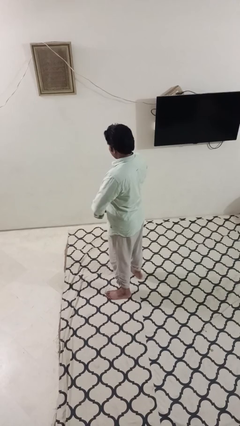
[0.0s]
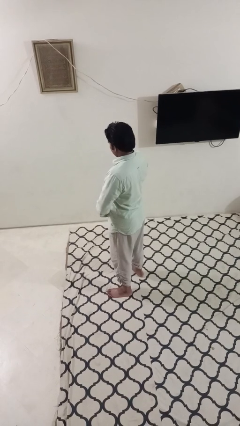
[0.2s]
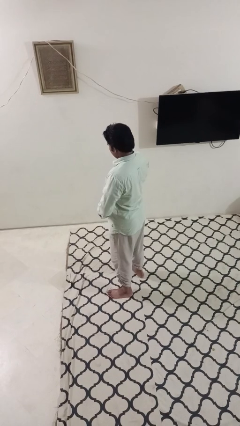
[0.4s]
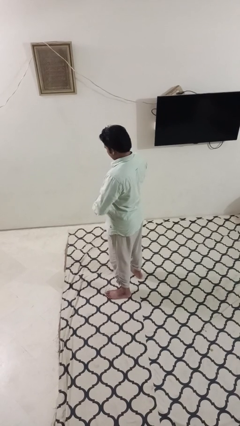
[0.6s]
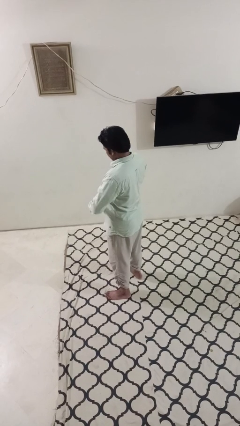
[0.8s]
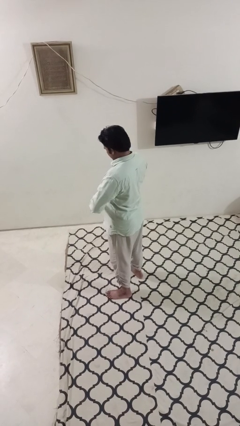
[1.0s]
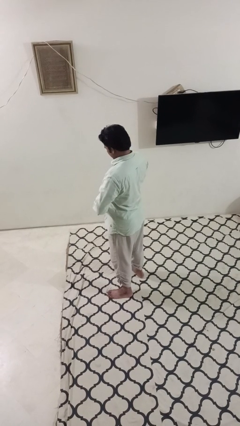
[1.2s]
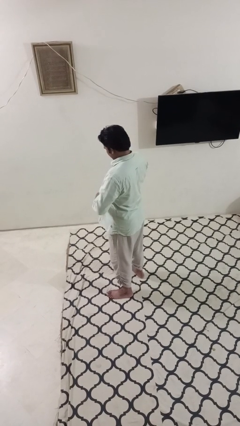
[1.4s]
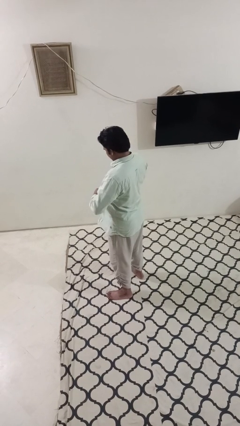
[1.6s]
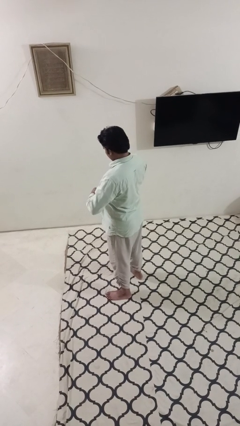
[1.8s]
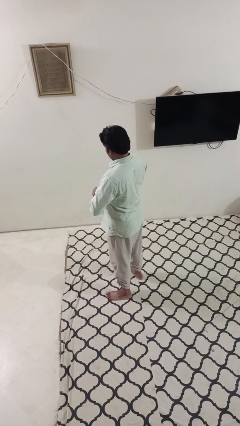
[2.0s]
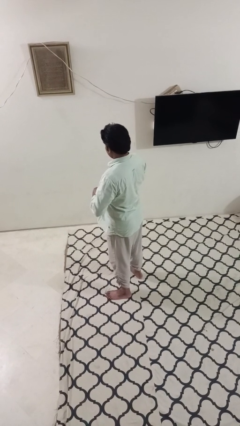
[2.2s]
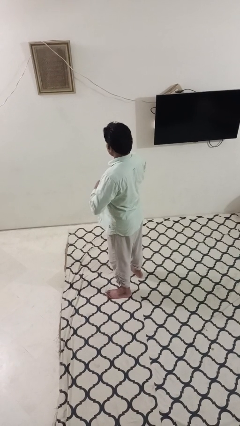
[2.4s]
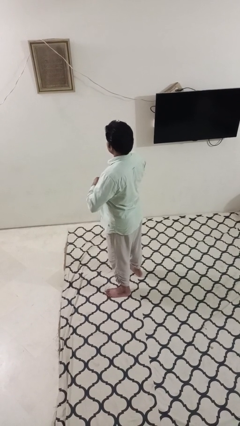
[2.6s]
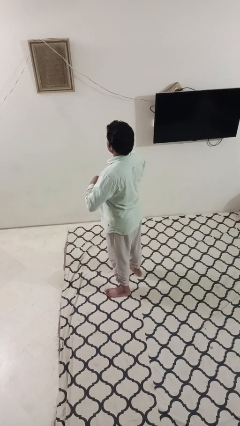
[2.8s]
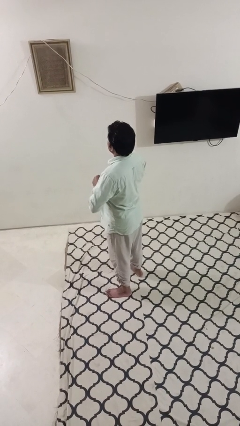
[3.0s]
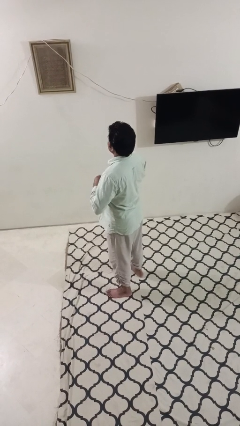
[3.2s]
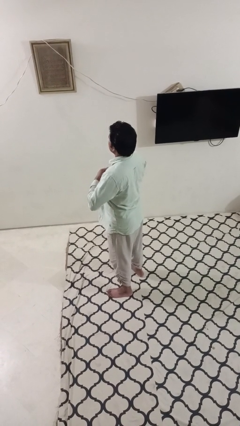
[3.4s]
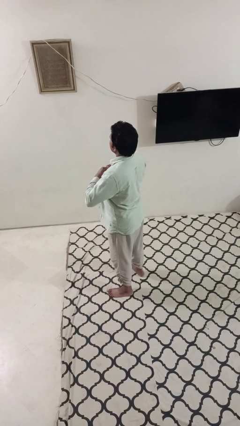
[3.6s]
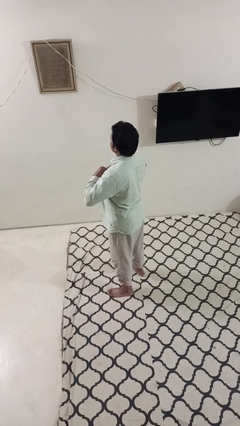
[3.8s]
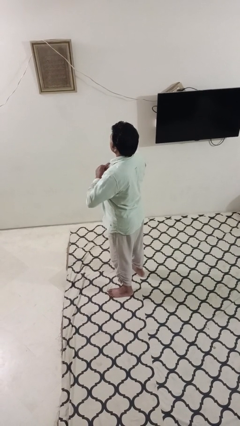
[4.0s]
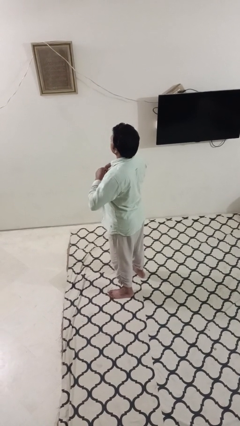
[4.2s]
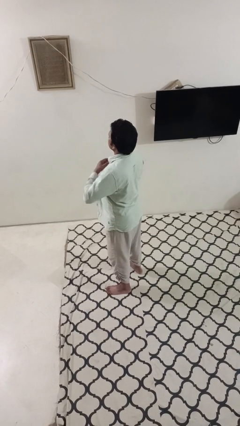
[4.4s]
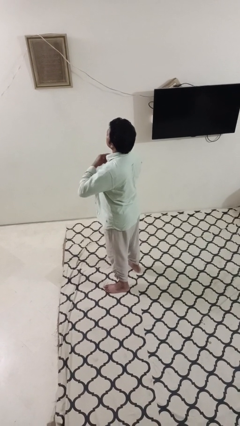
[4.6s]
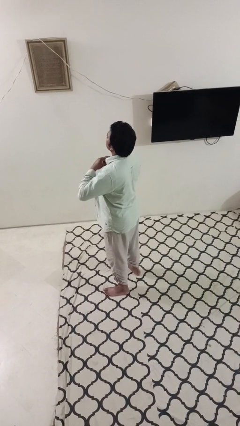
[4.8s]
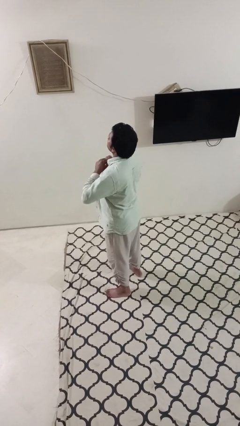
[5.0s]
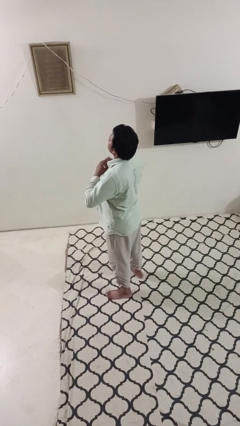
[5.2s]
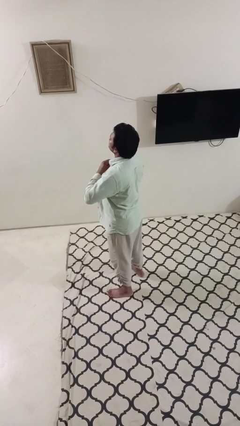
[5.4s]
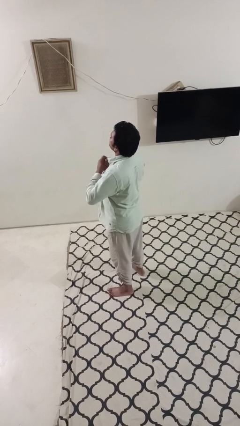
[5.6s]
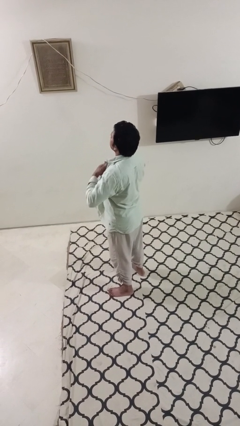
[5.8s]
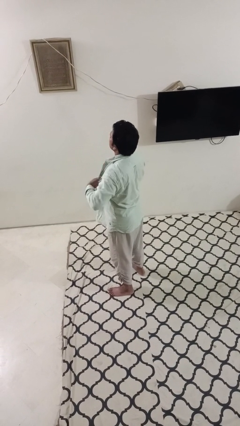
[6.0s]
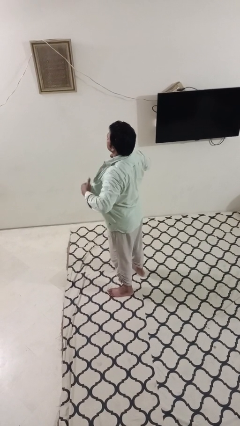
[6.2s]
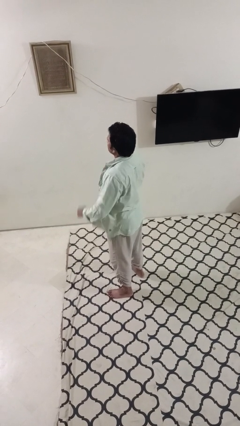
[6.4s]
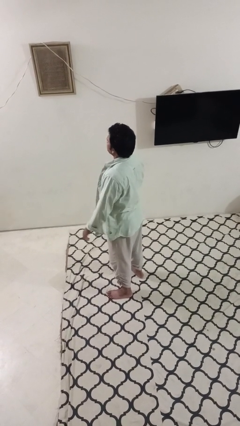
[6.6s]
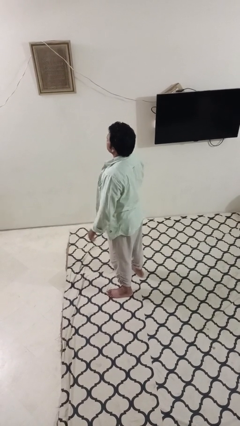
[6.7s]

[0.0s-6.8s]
person unbuttons shirt

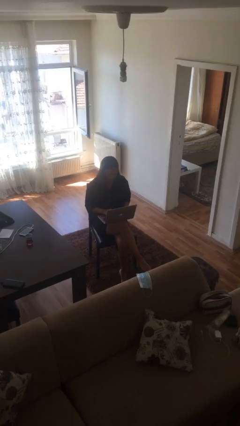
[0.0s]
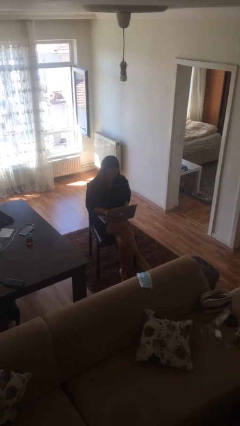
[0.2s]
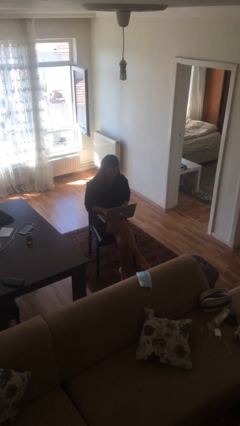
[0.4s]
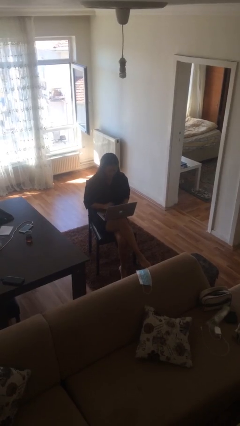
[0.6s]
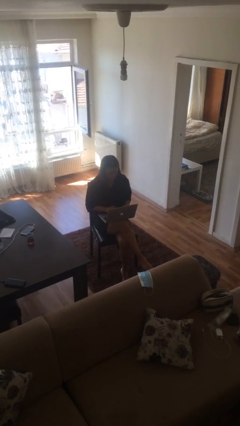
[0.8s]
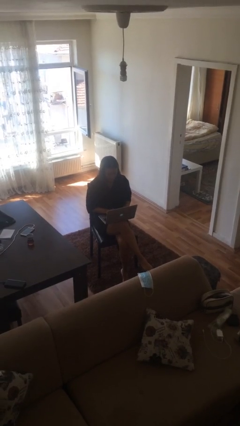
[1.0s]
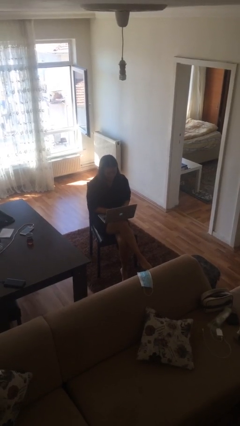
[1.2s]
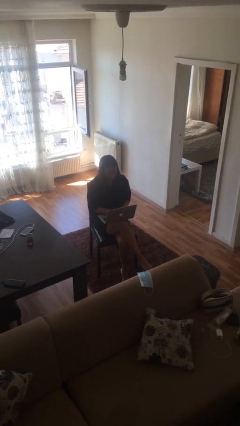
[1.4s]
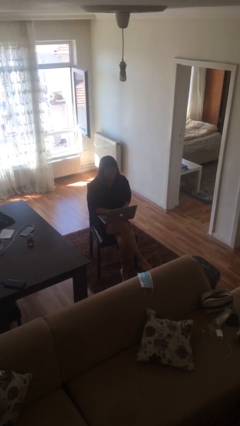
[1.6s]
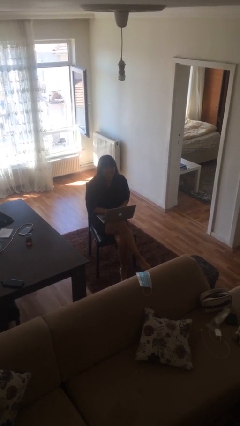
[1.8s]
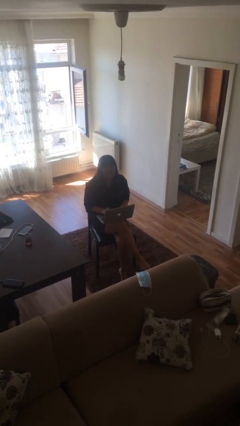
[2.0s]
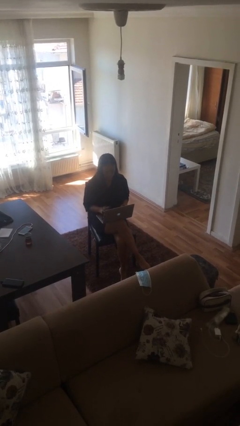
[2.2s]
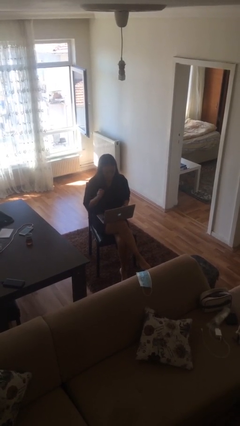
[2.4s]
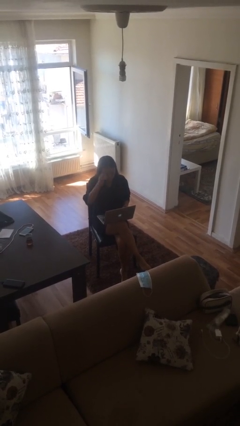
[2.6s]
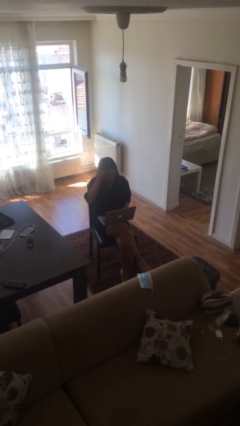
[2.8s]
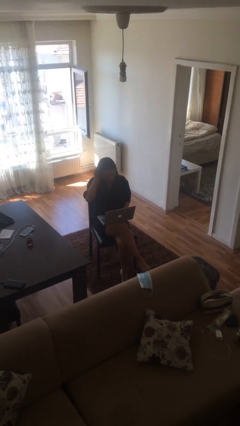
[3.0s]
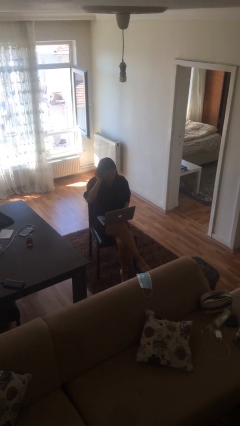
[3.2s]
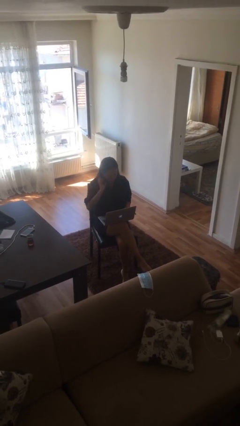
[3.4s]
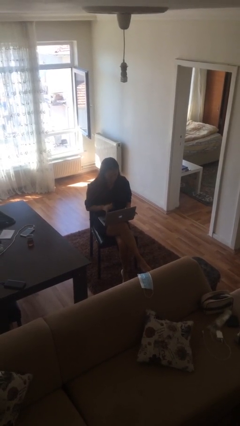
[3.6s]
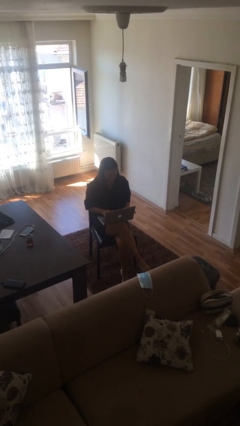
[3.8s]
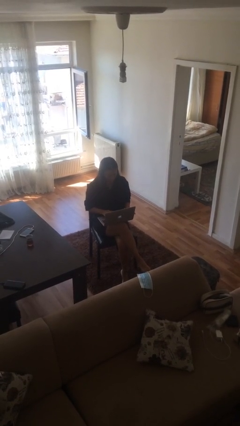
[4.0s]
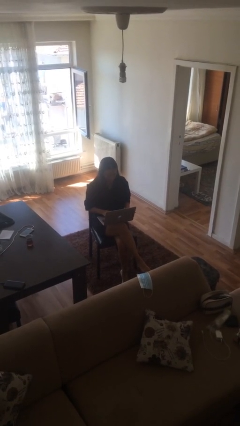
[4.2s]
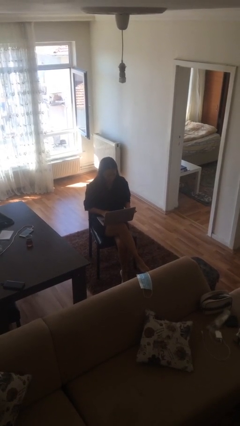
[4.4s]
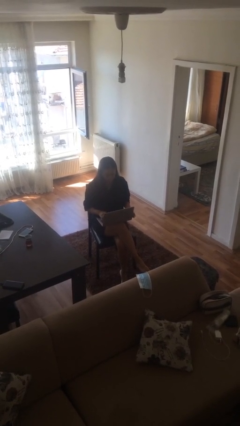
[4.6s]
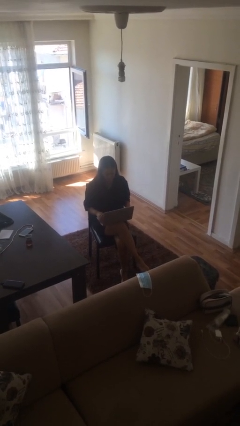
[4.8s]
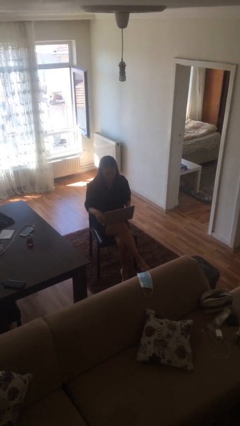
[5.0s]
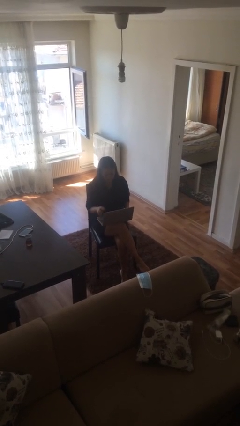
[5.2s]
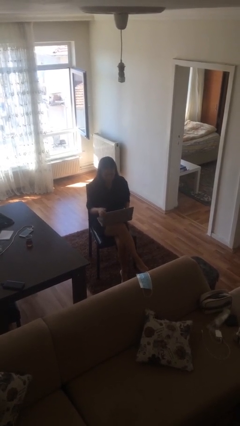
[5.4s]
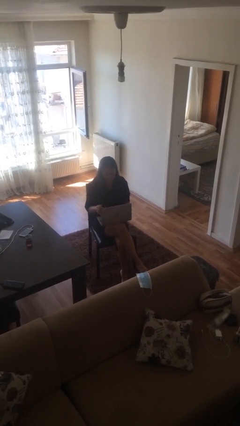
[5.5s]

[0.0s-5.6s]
person interacts with laptop

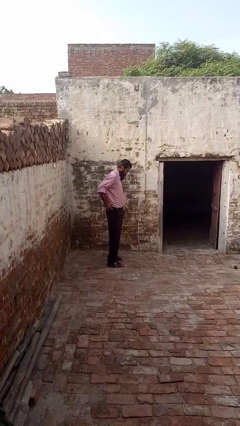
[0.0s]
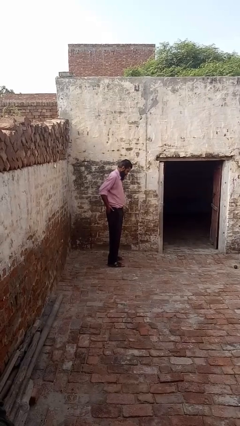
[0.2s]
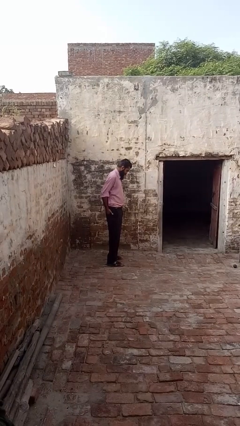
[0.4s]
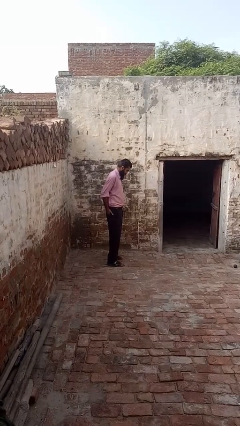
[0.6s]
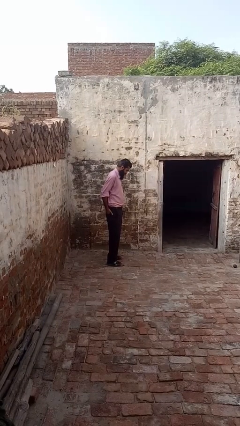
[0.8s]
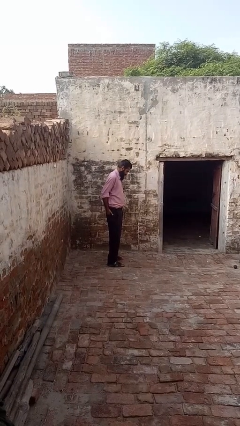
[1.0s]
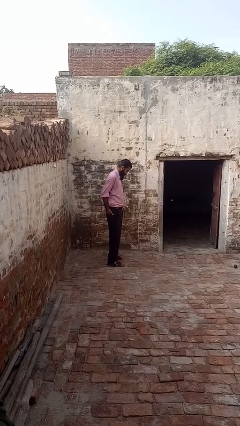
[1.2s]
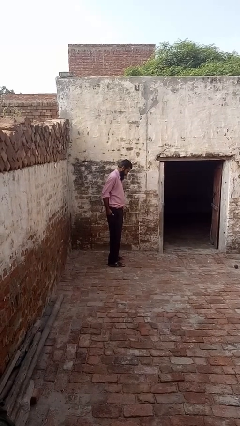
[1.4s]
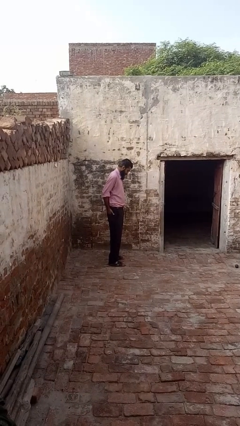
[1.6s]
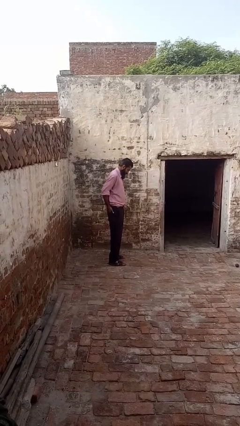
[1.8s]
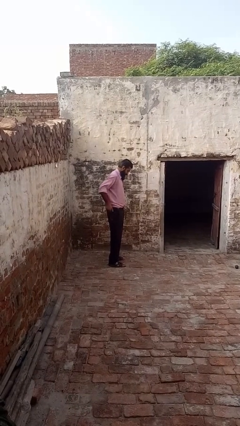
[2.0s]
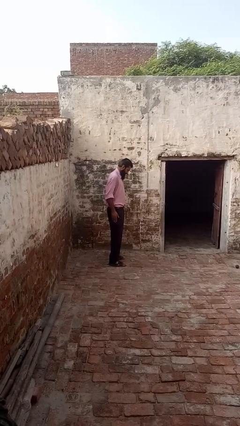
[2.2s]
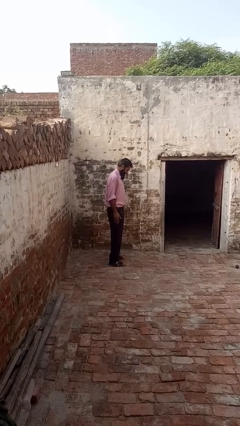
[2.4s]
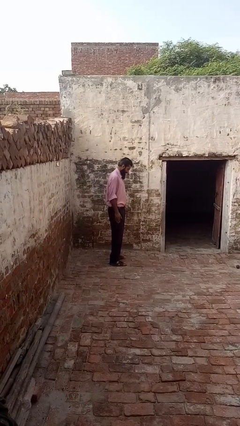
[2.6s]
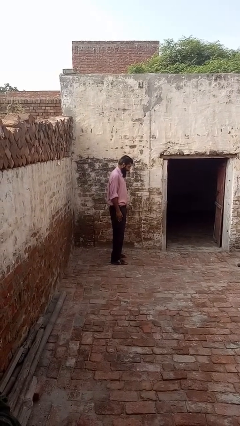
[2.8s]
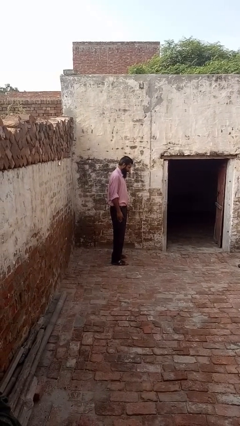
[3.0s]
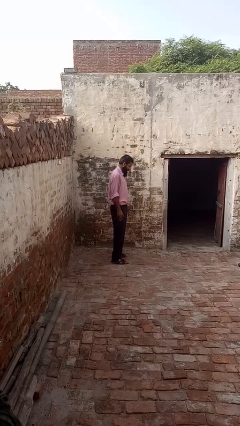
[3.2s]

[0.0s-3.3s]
person puts hands in back pockets

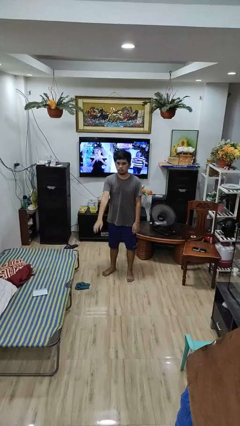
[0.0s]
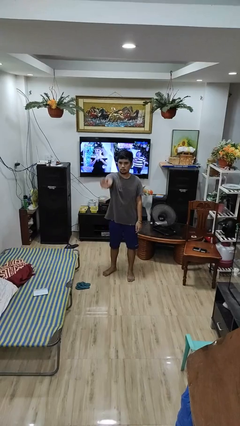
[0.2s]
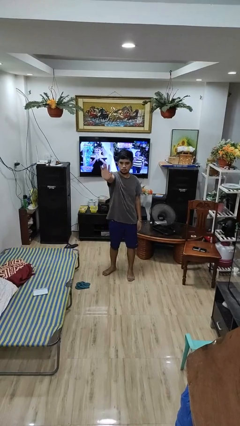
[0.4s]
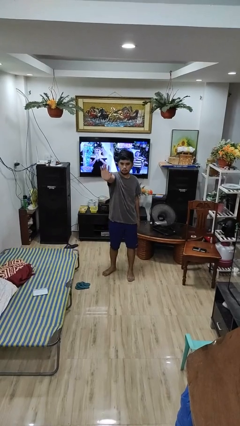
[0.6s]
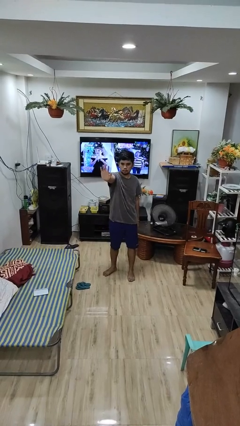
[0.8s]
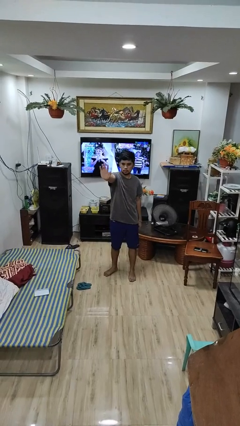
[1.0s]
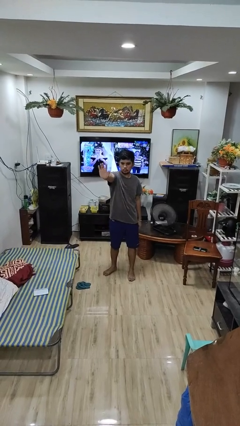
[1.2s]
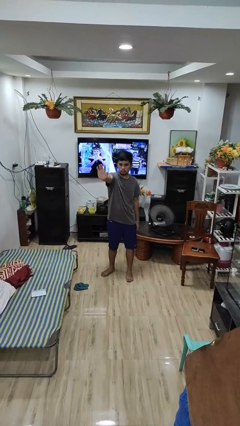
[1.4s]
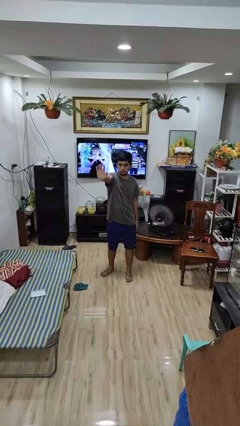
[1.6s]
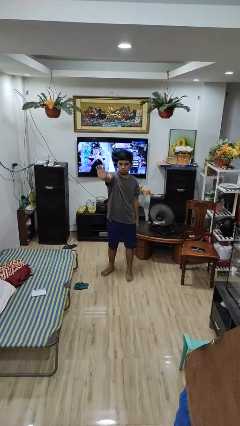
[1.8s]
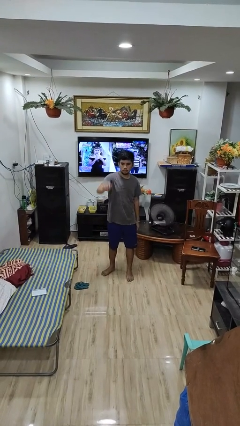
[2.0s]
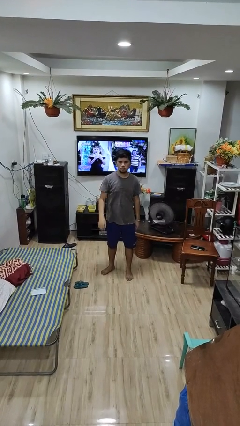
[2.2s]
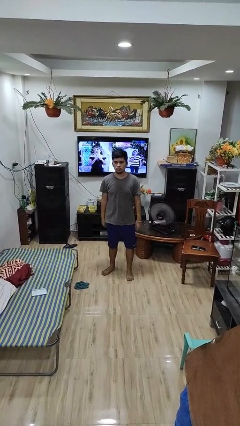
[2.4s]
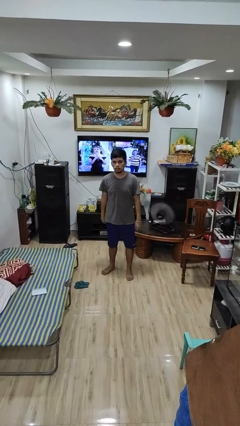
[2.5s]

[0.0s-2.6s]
person gestures stop
